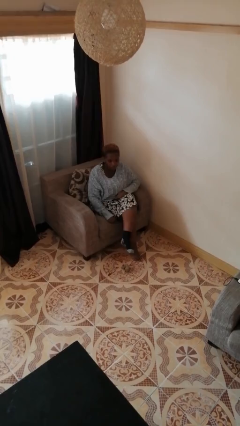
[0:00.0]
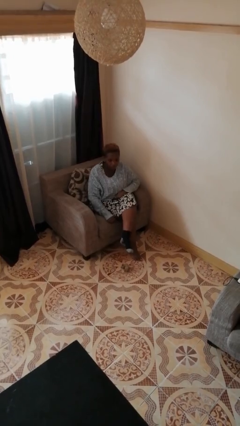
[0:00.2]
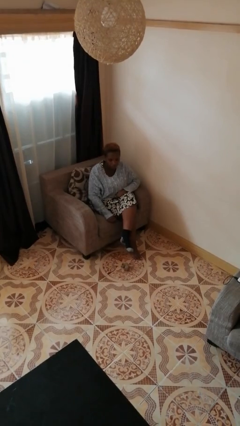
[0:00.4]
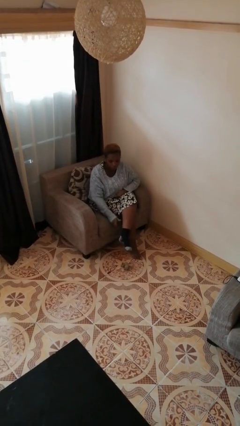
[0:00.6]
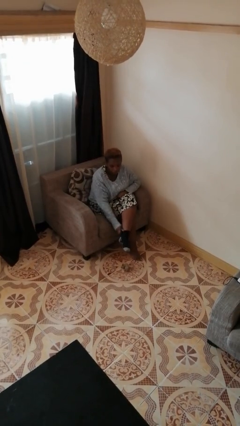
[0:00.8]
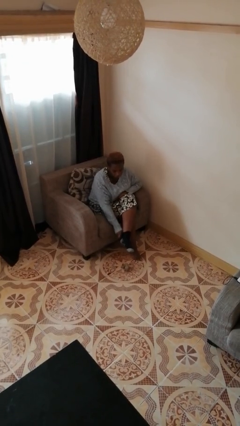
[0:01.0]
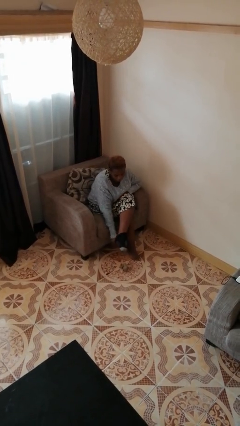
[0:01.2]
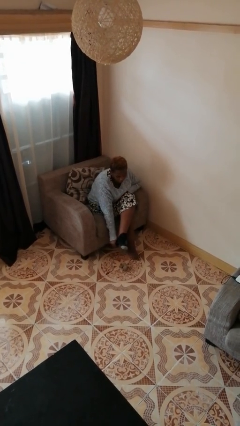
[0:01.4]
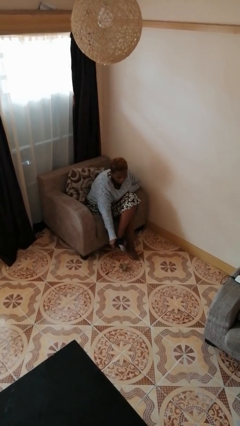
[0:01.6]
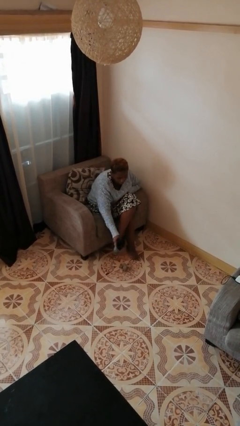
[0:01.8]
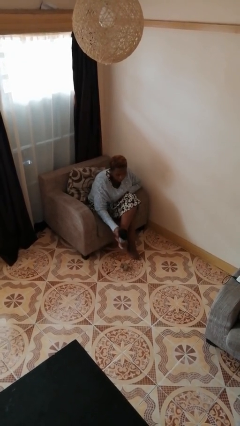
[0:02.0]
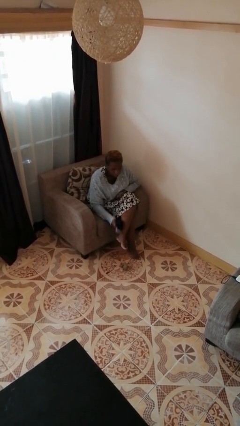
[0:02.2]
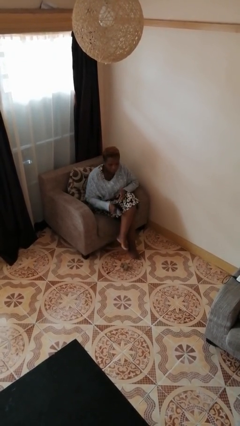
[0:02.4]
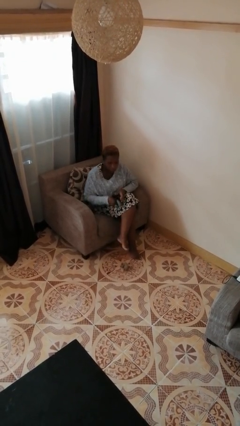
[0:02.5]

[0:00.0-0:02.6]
person takes off socks

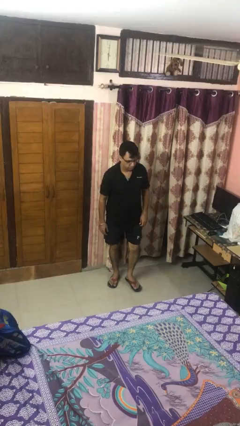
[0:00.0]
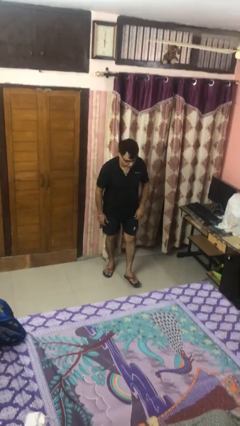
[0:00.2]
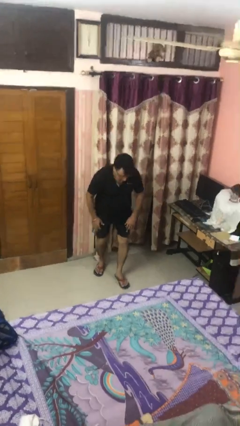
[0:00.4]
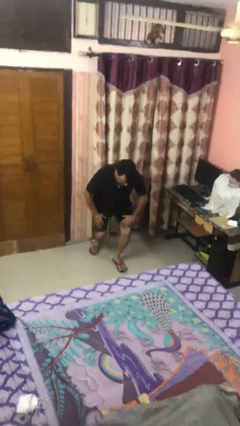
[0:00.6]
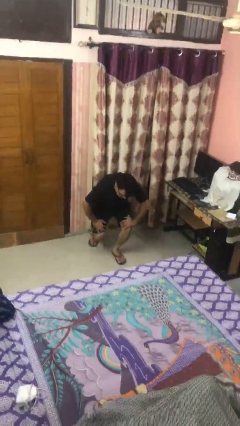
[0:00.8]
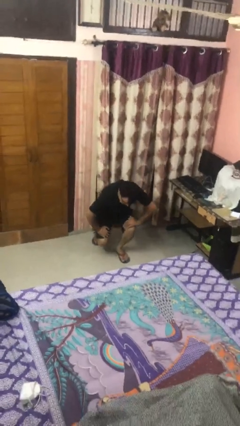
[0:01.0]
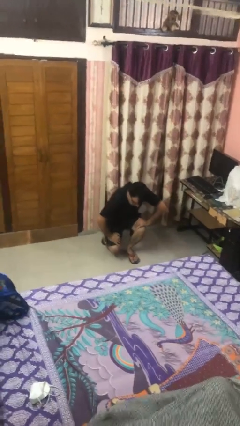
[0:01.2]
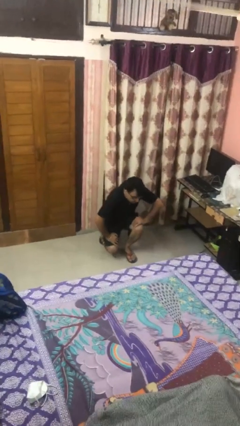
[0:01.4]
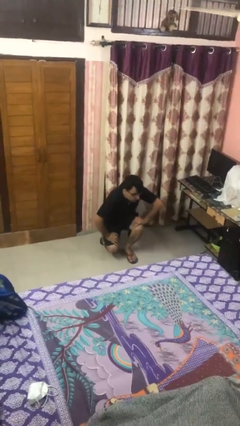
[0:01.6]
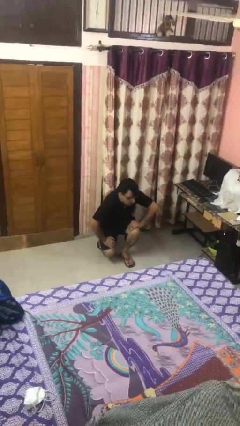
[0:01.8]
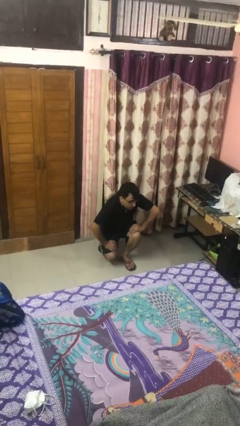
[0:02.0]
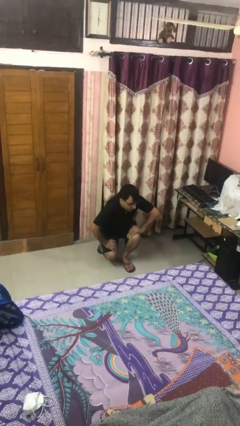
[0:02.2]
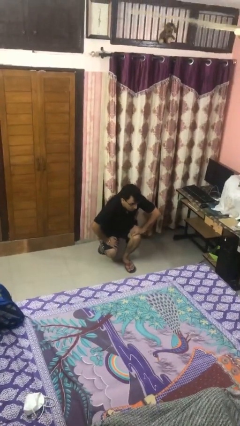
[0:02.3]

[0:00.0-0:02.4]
person kneels

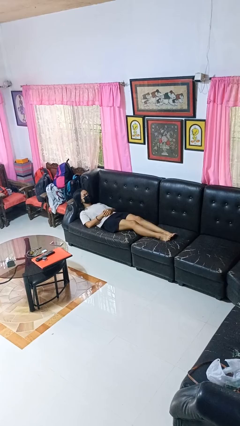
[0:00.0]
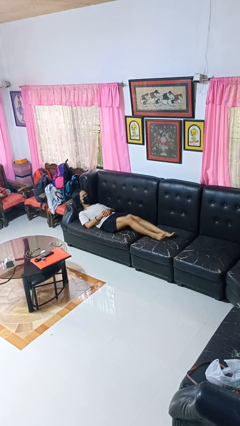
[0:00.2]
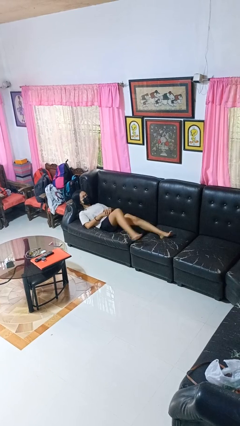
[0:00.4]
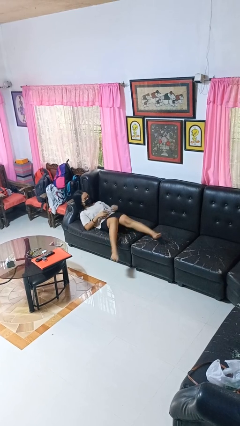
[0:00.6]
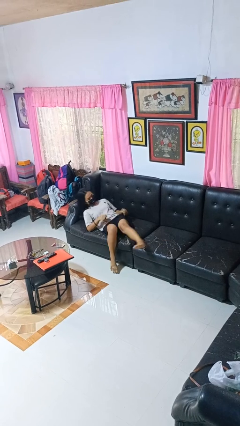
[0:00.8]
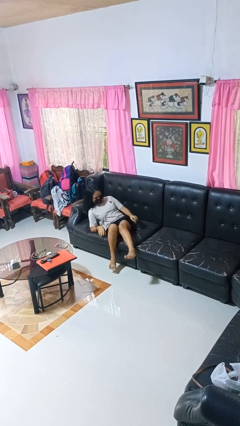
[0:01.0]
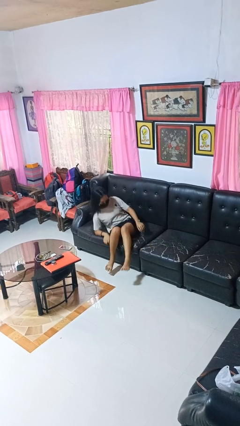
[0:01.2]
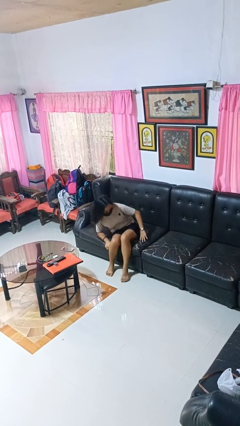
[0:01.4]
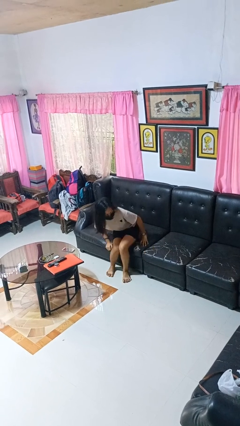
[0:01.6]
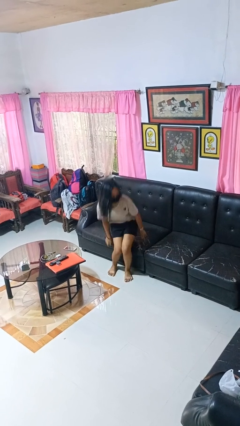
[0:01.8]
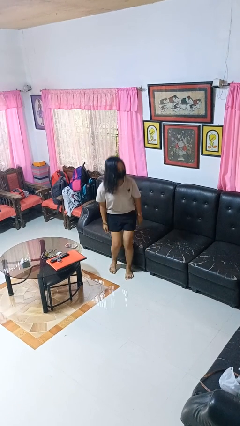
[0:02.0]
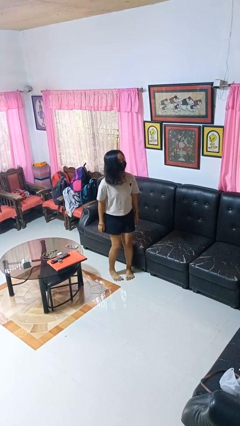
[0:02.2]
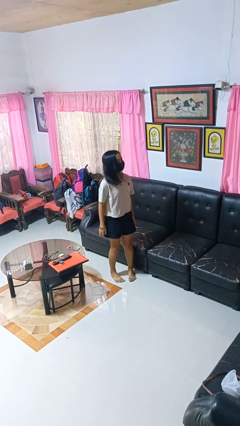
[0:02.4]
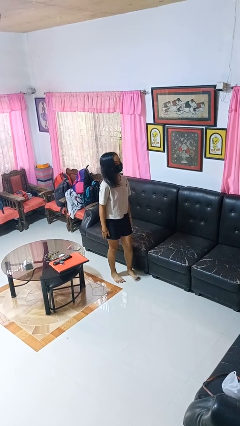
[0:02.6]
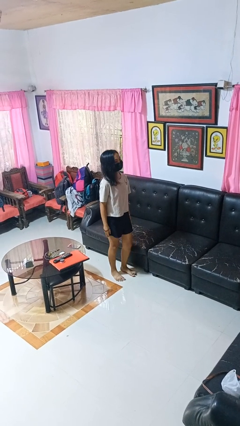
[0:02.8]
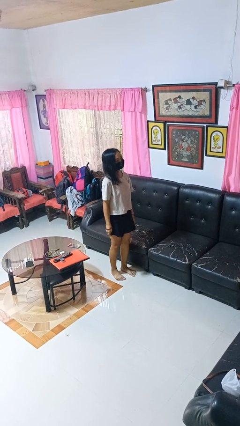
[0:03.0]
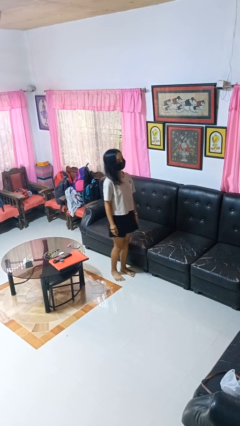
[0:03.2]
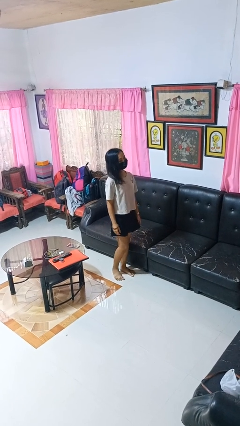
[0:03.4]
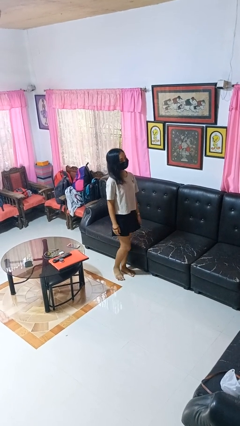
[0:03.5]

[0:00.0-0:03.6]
person stands up

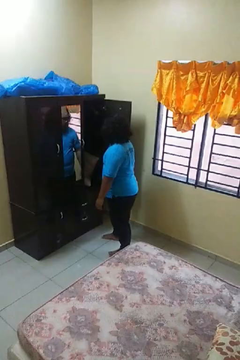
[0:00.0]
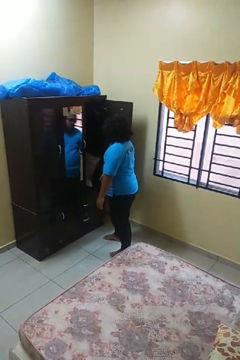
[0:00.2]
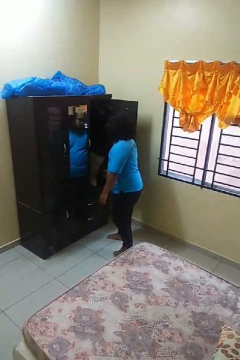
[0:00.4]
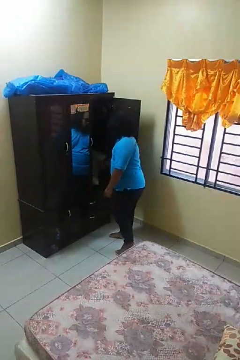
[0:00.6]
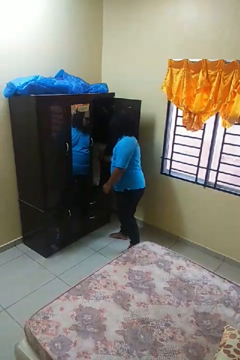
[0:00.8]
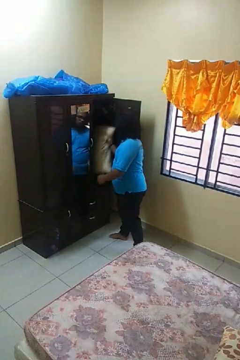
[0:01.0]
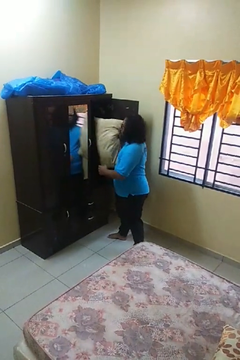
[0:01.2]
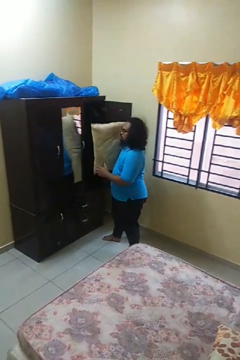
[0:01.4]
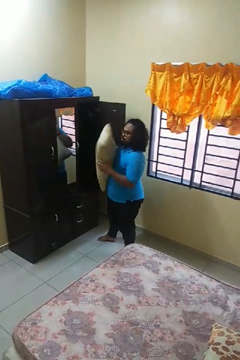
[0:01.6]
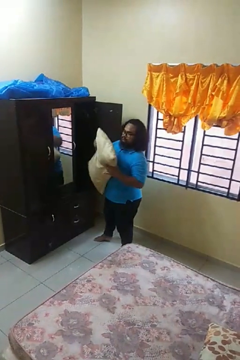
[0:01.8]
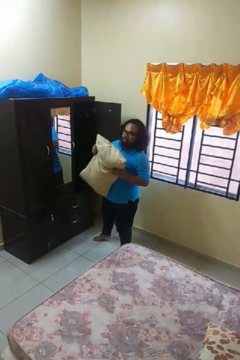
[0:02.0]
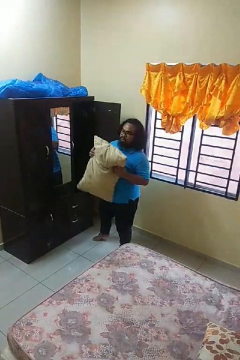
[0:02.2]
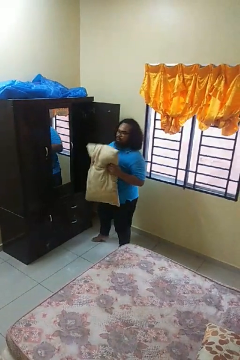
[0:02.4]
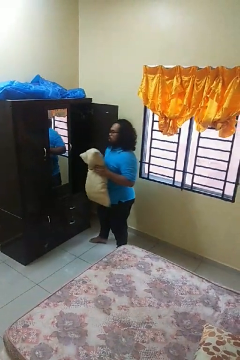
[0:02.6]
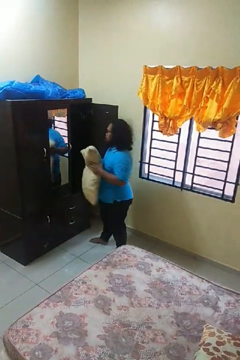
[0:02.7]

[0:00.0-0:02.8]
person picks up object from cabinet

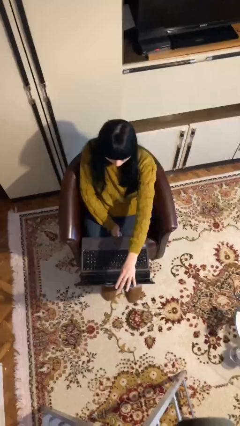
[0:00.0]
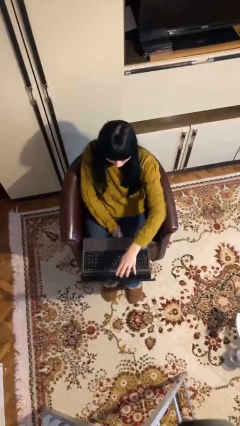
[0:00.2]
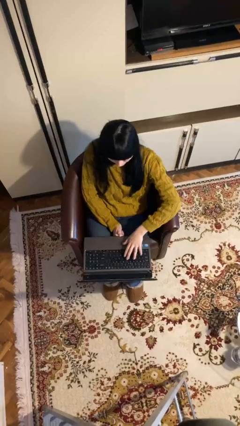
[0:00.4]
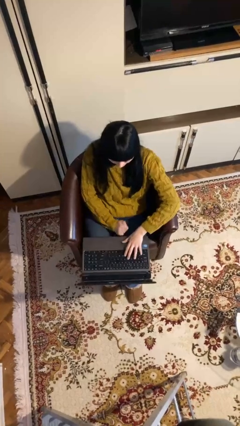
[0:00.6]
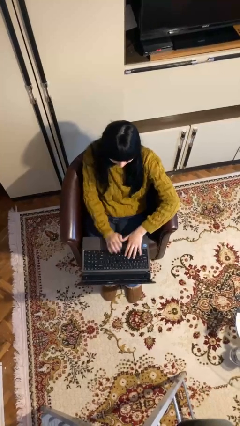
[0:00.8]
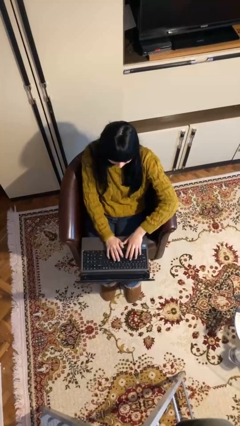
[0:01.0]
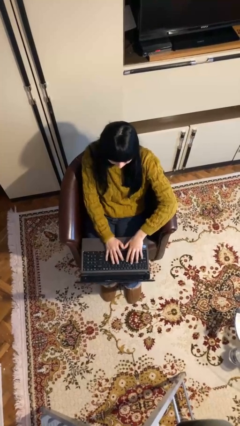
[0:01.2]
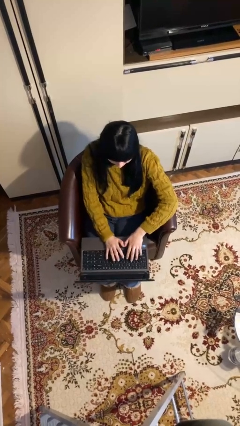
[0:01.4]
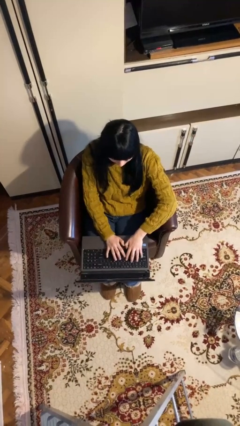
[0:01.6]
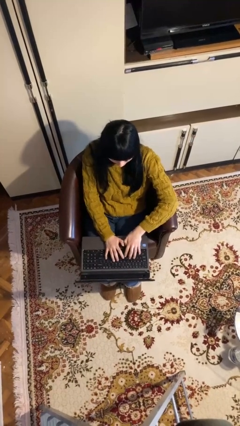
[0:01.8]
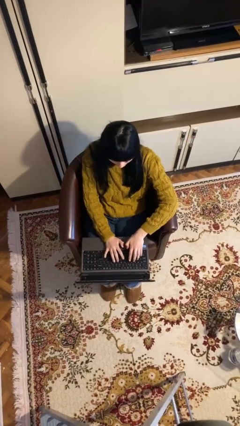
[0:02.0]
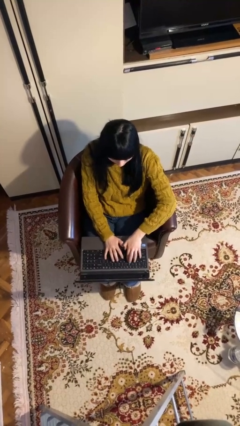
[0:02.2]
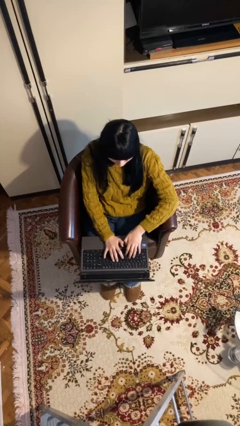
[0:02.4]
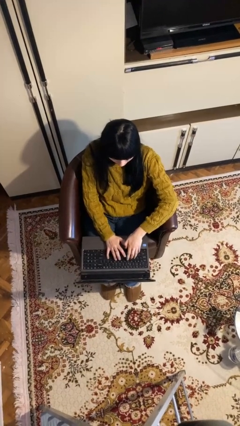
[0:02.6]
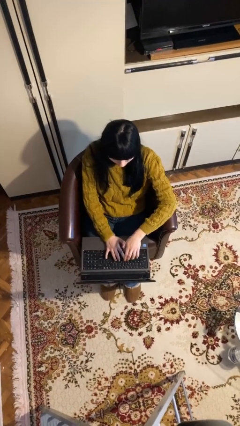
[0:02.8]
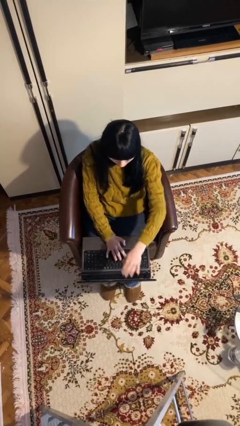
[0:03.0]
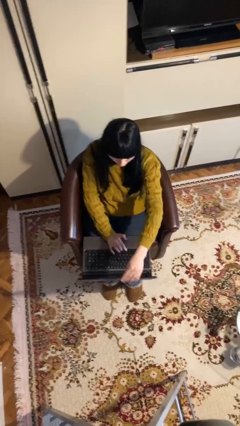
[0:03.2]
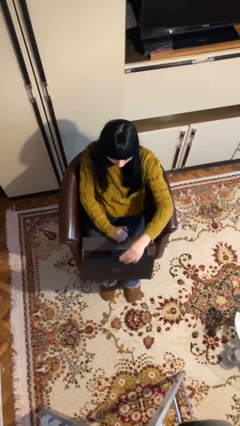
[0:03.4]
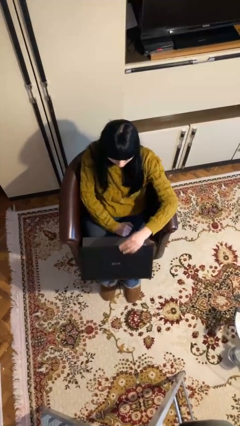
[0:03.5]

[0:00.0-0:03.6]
person interacts with laptop

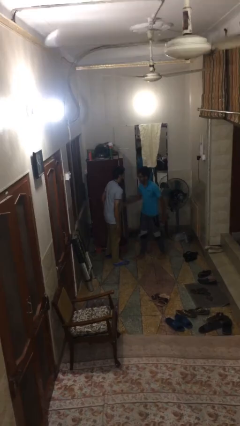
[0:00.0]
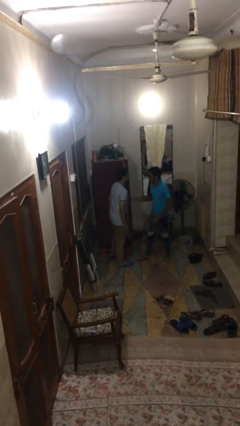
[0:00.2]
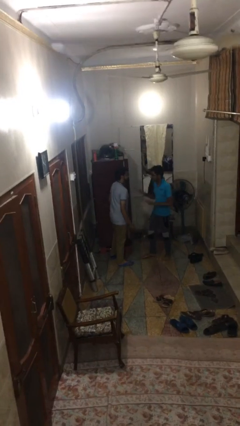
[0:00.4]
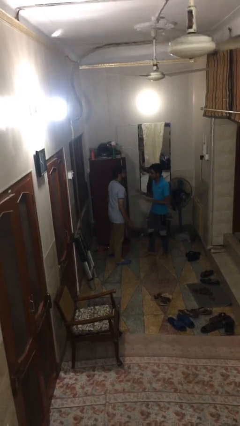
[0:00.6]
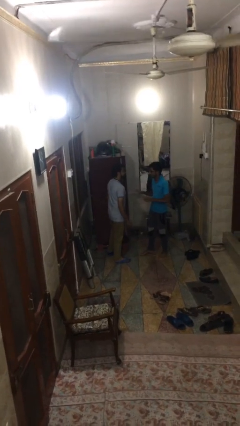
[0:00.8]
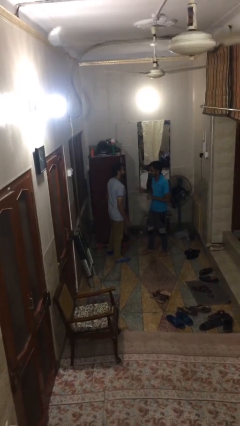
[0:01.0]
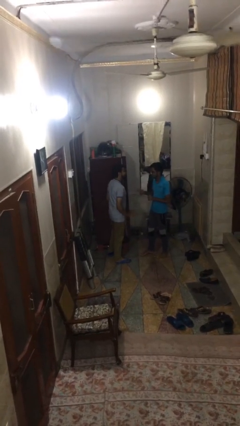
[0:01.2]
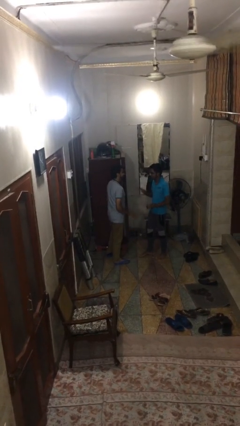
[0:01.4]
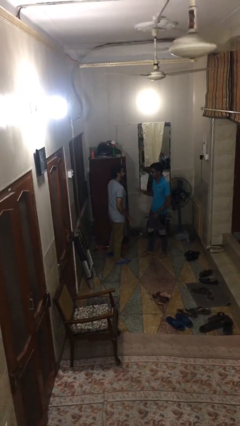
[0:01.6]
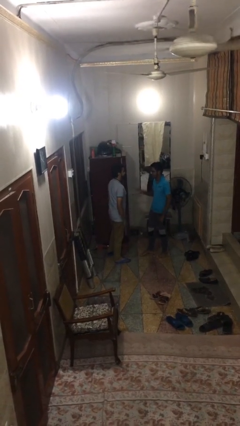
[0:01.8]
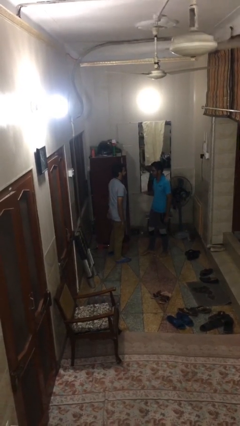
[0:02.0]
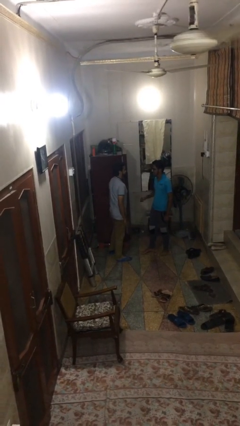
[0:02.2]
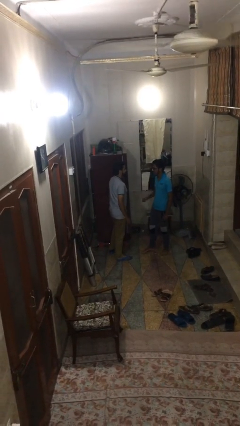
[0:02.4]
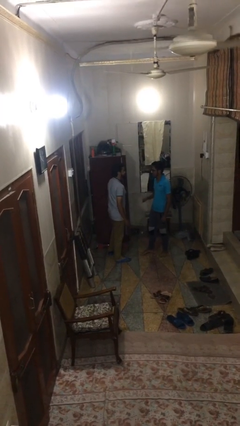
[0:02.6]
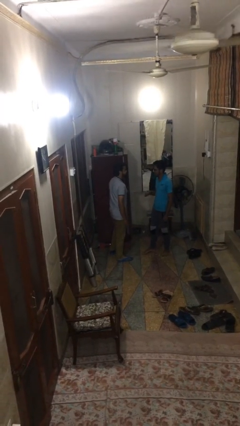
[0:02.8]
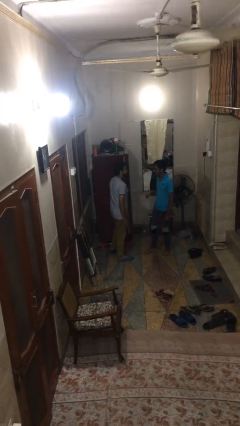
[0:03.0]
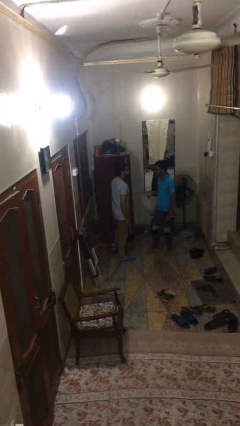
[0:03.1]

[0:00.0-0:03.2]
person talks to person
